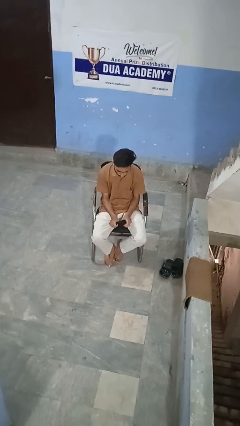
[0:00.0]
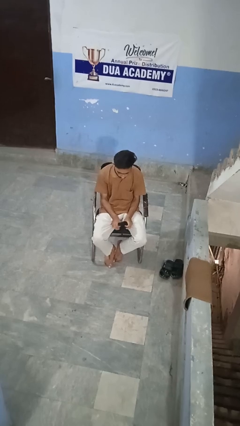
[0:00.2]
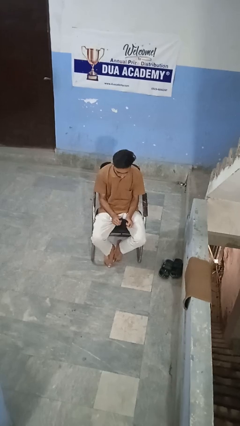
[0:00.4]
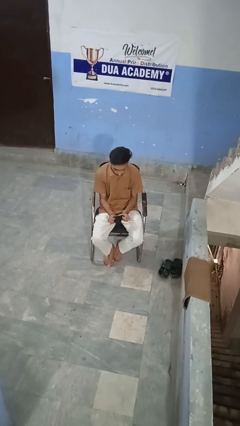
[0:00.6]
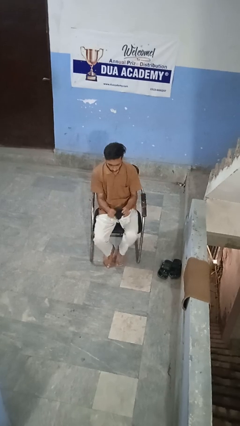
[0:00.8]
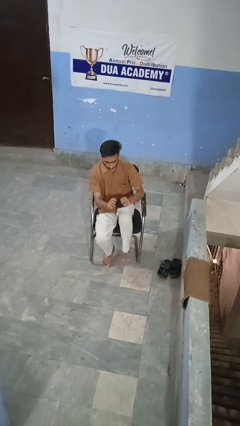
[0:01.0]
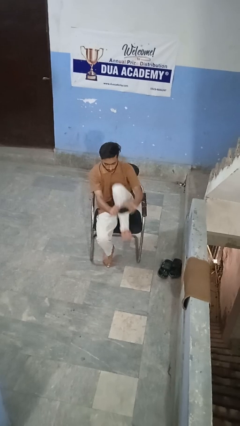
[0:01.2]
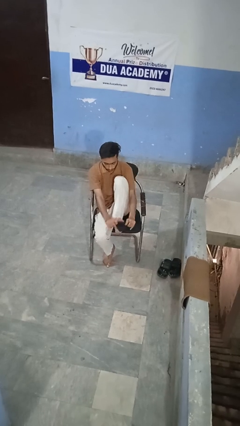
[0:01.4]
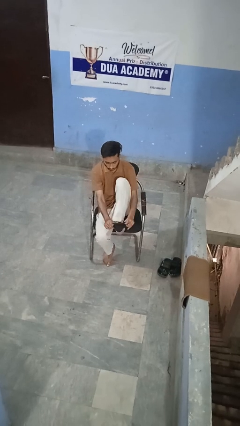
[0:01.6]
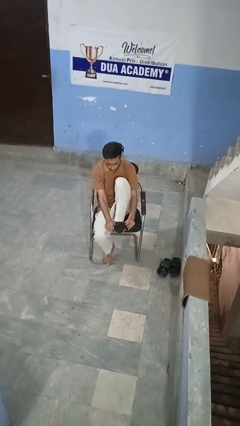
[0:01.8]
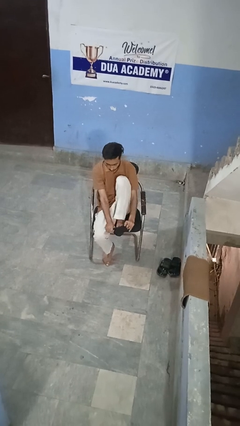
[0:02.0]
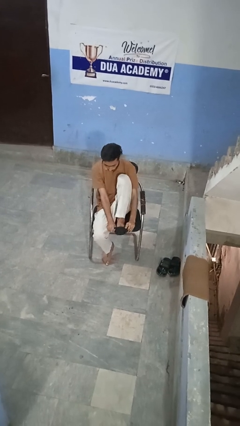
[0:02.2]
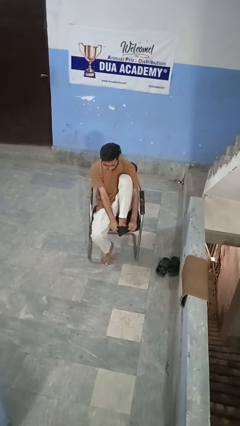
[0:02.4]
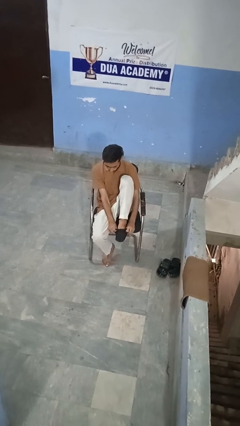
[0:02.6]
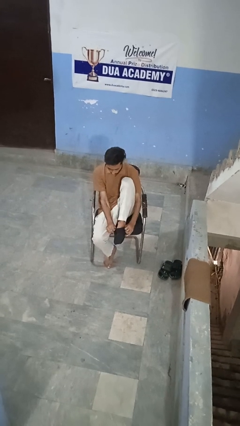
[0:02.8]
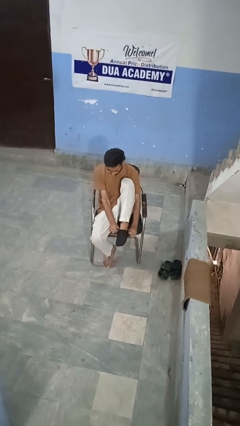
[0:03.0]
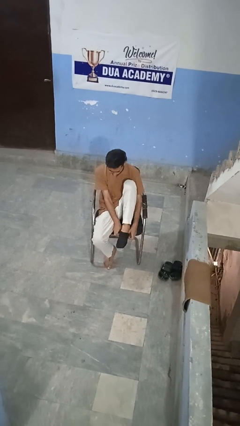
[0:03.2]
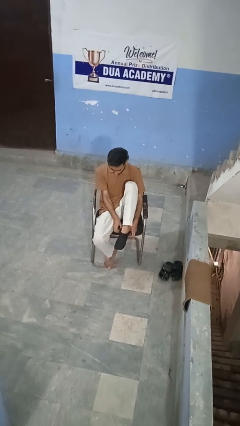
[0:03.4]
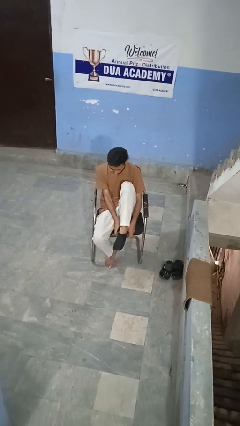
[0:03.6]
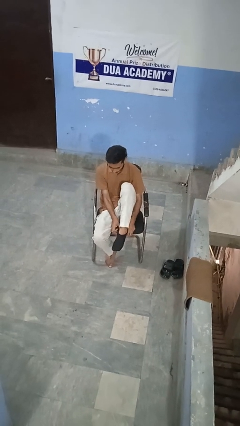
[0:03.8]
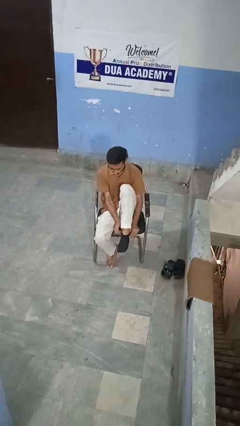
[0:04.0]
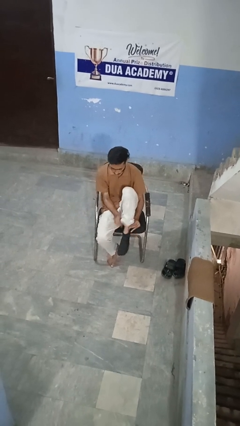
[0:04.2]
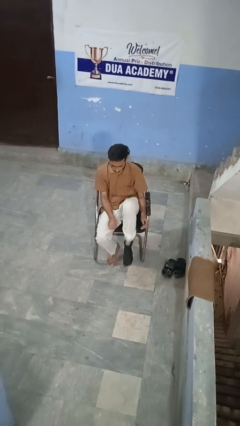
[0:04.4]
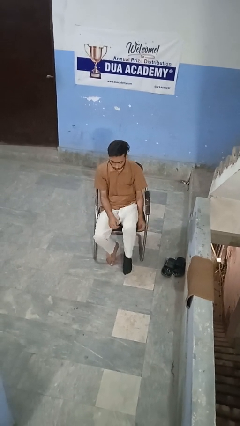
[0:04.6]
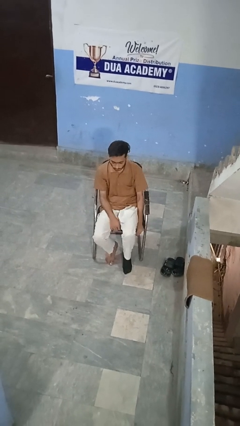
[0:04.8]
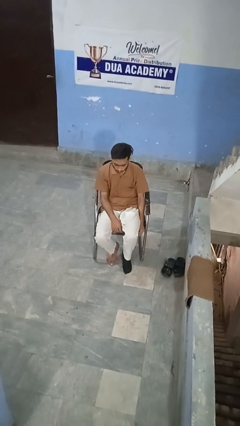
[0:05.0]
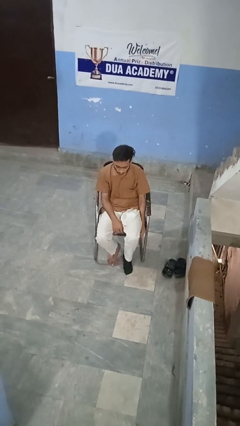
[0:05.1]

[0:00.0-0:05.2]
person puts on socks

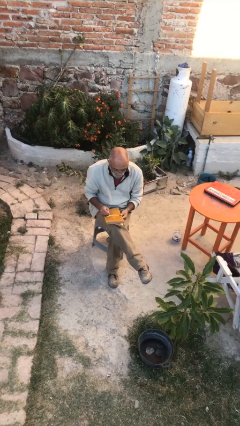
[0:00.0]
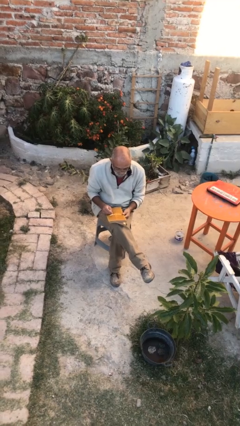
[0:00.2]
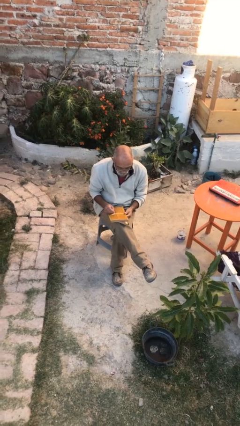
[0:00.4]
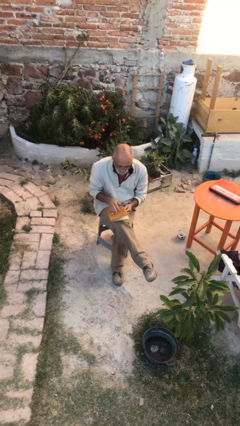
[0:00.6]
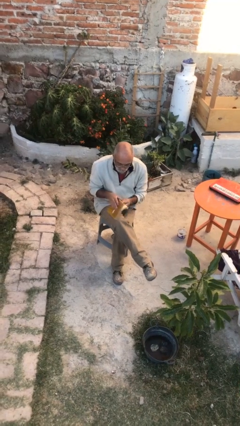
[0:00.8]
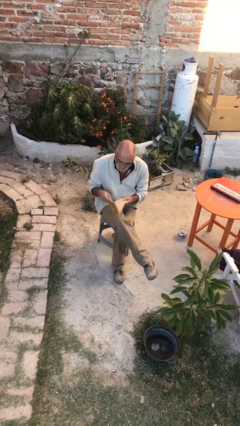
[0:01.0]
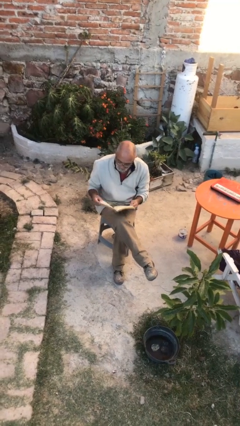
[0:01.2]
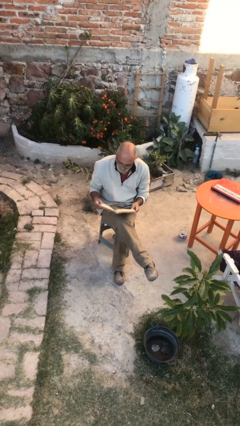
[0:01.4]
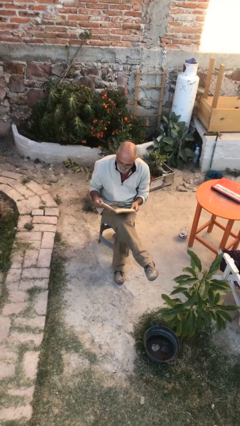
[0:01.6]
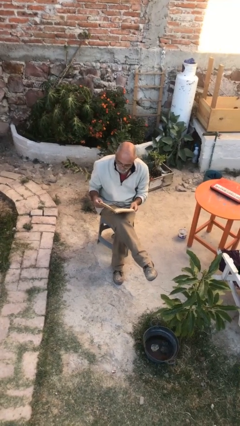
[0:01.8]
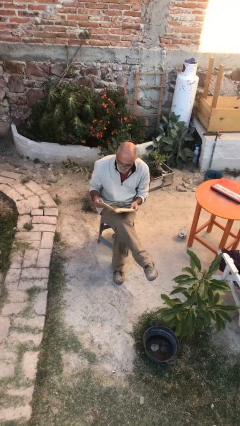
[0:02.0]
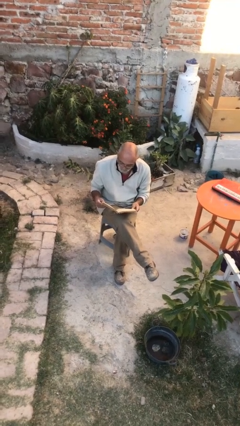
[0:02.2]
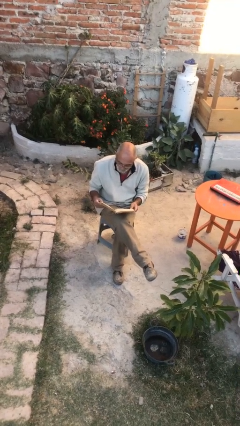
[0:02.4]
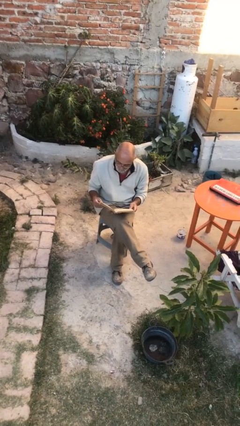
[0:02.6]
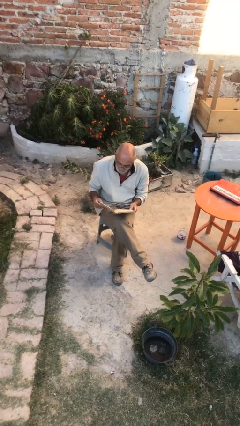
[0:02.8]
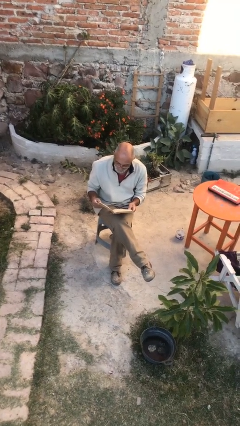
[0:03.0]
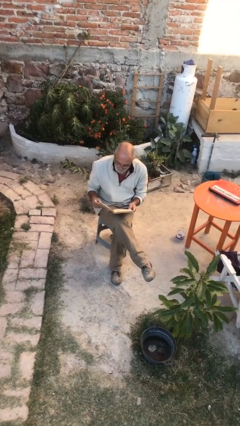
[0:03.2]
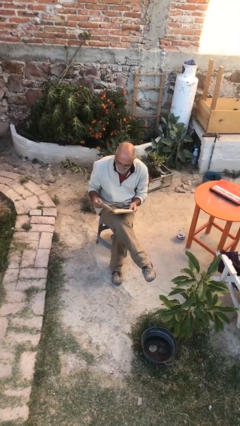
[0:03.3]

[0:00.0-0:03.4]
person reads document

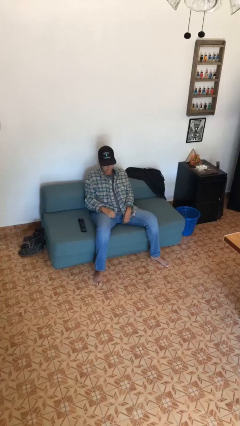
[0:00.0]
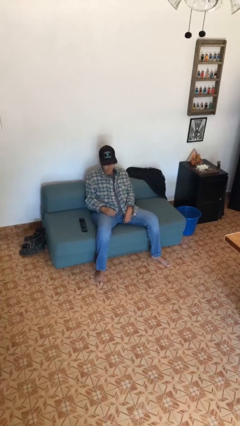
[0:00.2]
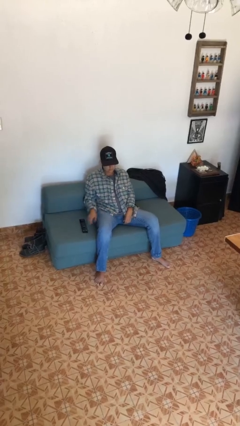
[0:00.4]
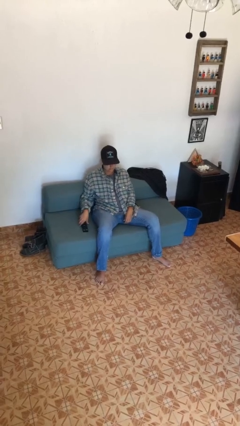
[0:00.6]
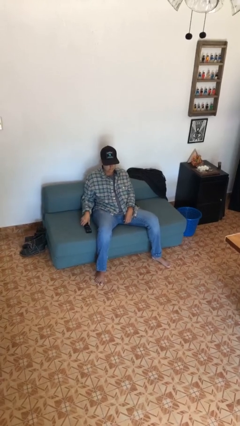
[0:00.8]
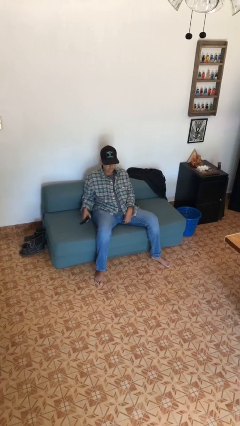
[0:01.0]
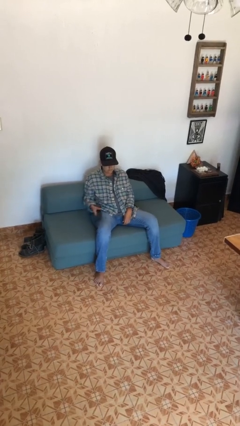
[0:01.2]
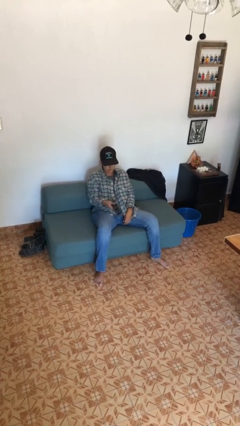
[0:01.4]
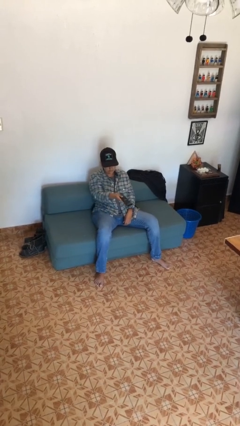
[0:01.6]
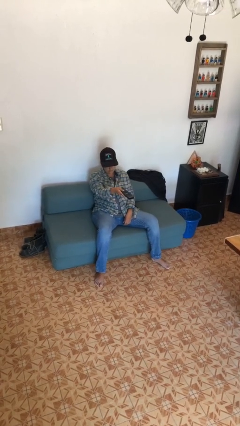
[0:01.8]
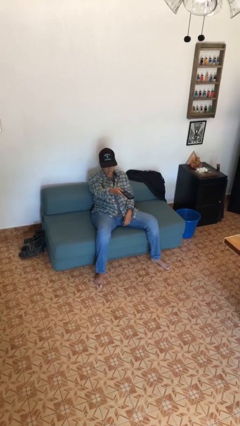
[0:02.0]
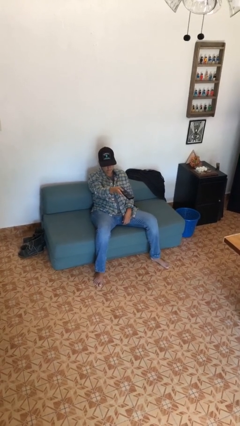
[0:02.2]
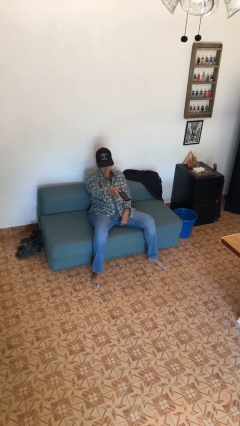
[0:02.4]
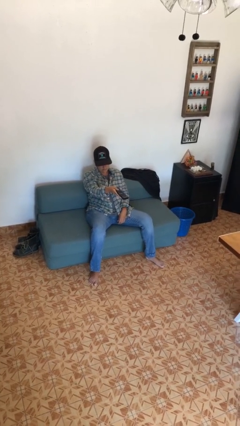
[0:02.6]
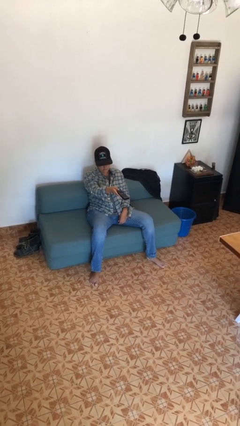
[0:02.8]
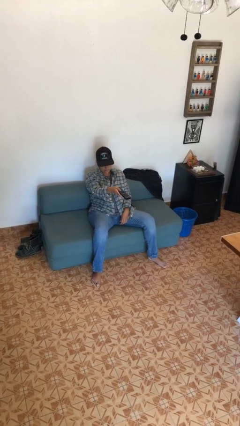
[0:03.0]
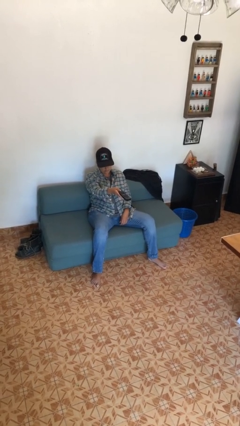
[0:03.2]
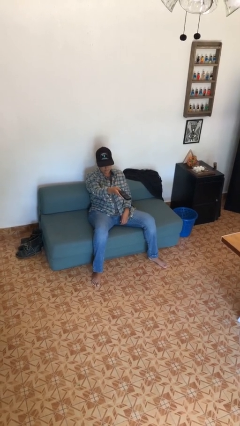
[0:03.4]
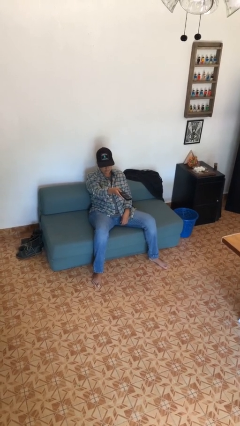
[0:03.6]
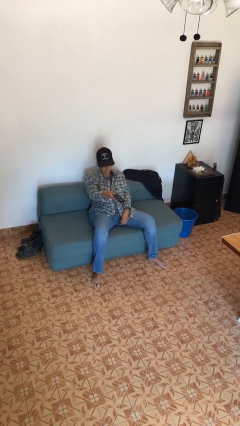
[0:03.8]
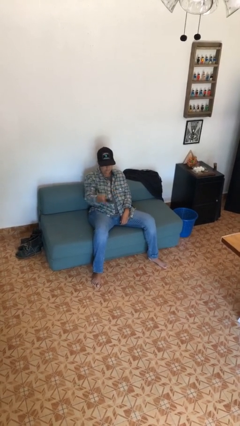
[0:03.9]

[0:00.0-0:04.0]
person uses television remote

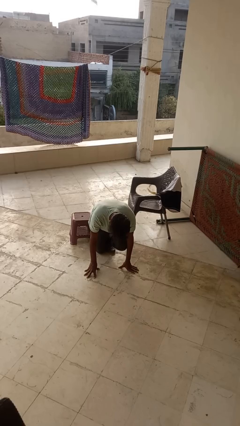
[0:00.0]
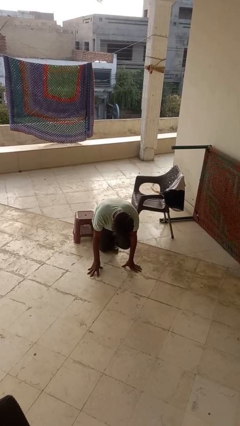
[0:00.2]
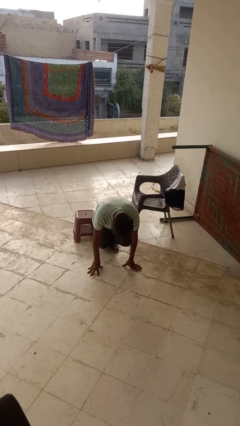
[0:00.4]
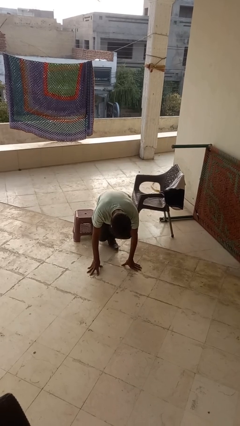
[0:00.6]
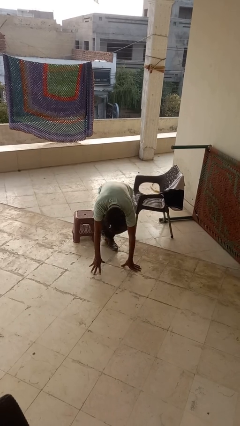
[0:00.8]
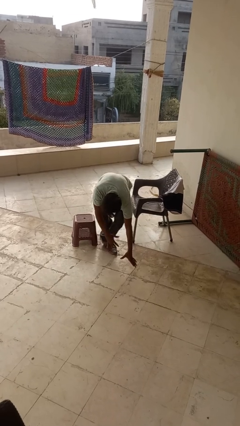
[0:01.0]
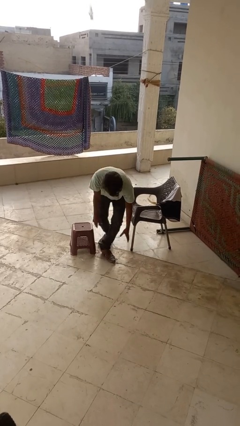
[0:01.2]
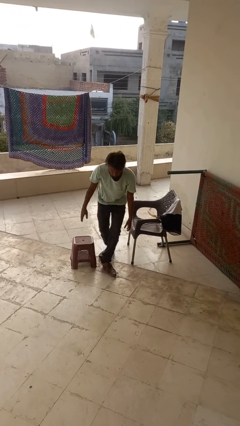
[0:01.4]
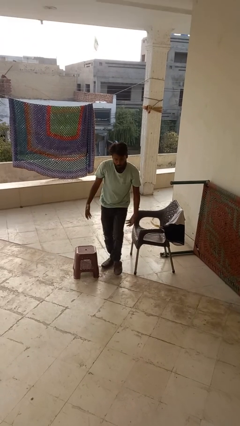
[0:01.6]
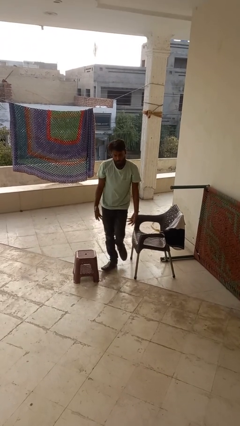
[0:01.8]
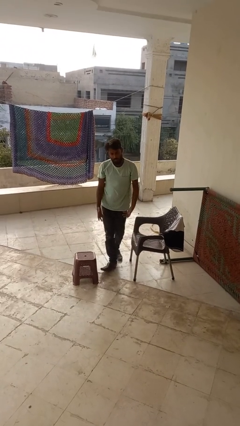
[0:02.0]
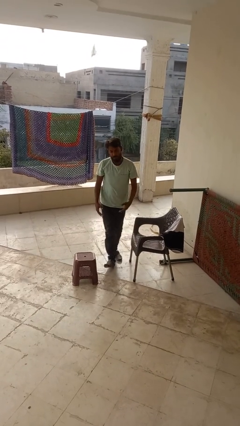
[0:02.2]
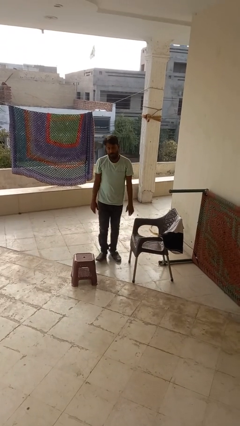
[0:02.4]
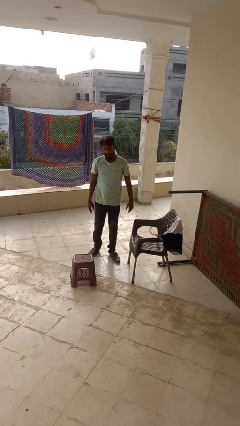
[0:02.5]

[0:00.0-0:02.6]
person stands up from floor

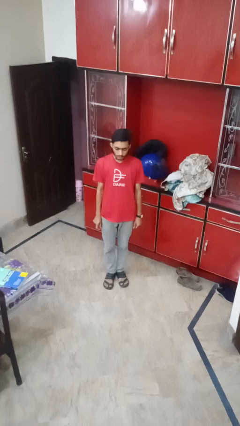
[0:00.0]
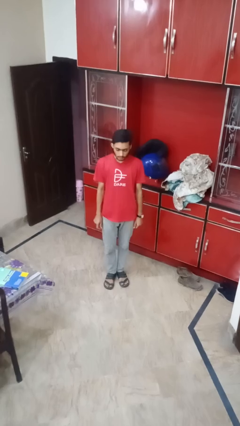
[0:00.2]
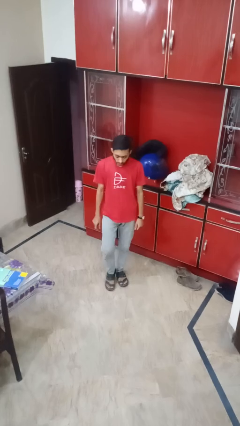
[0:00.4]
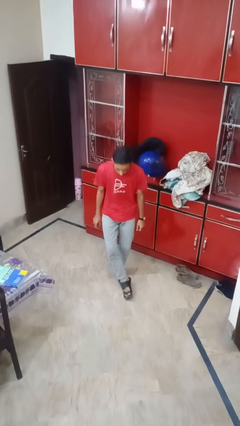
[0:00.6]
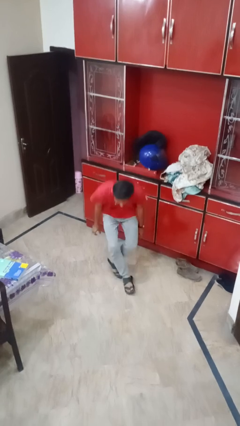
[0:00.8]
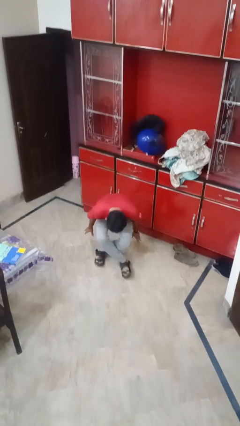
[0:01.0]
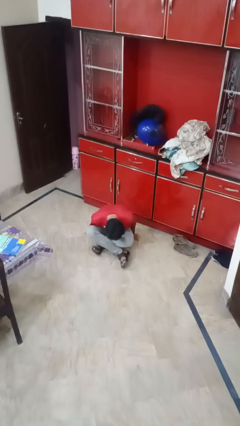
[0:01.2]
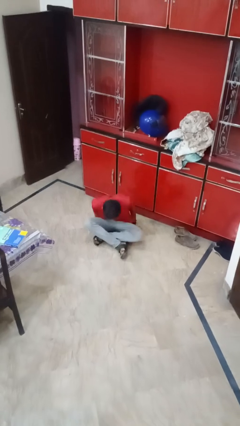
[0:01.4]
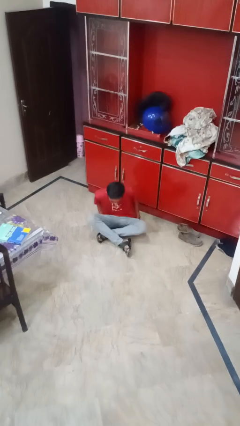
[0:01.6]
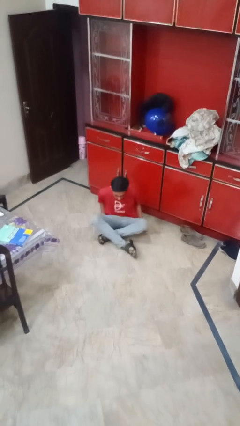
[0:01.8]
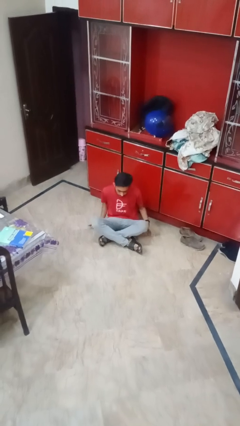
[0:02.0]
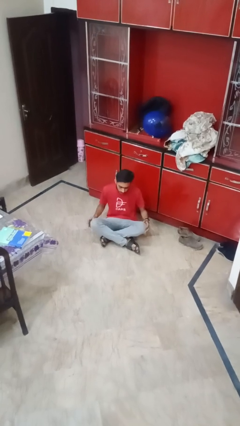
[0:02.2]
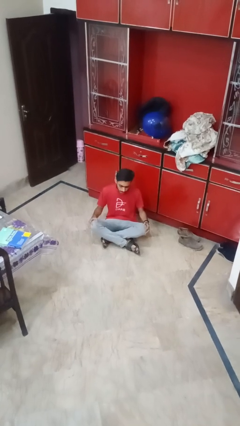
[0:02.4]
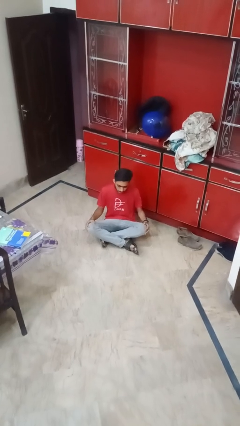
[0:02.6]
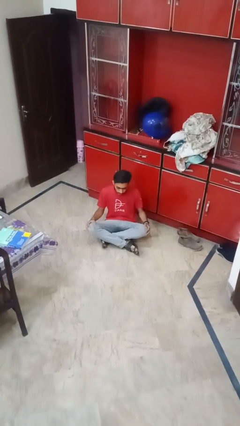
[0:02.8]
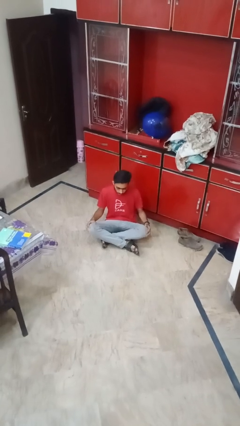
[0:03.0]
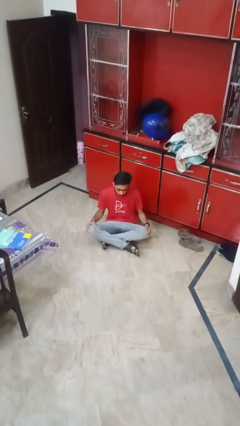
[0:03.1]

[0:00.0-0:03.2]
person sits crisscross
